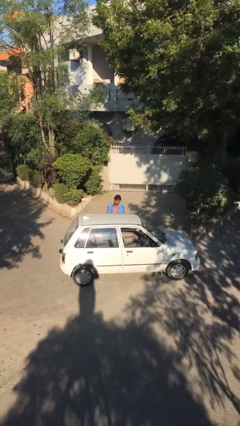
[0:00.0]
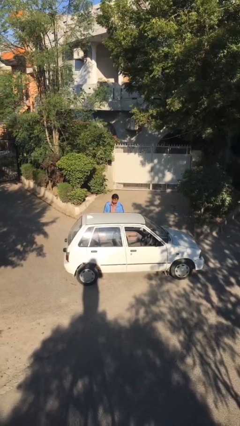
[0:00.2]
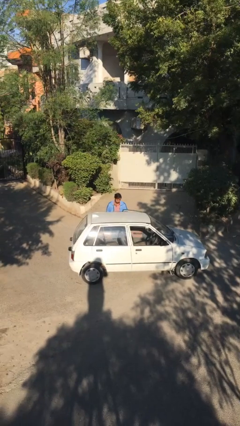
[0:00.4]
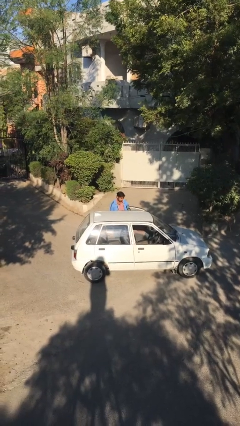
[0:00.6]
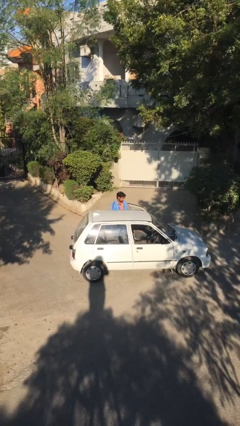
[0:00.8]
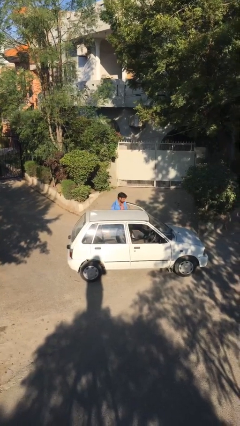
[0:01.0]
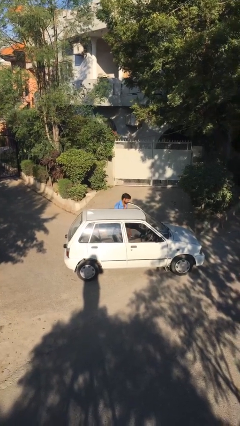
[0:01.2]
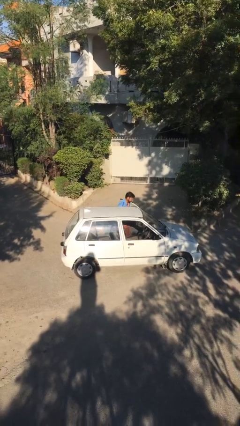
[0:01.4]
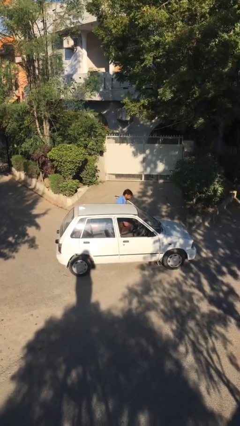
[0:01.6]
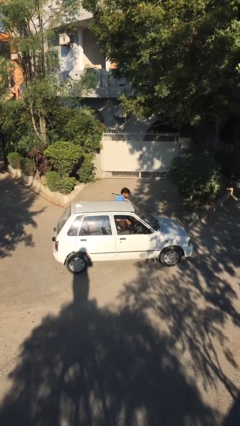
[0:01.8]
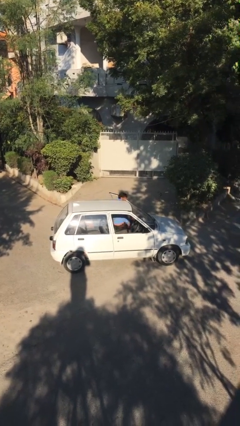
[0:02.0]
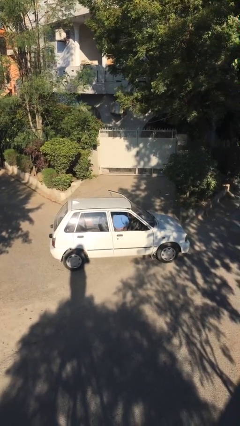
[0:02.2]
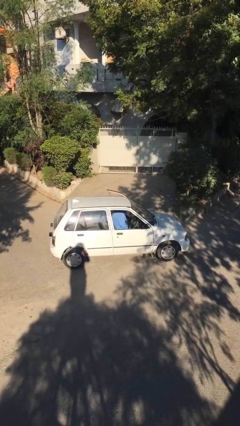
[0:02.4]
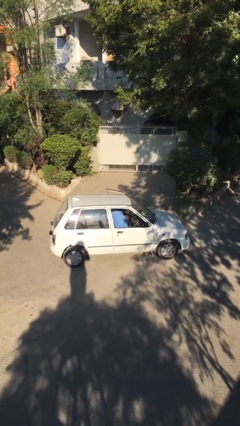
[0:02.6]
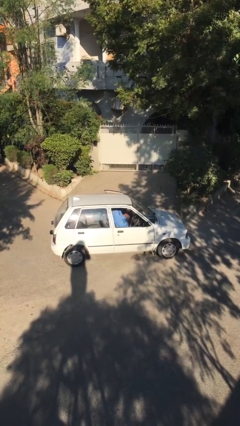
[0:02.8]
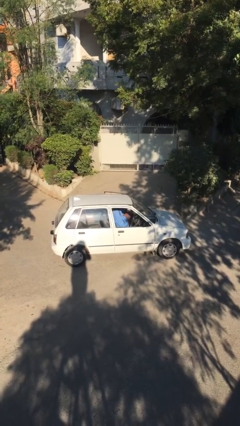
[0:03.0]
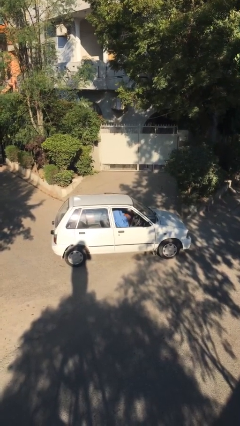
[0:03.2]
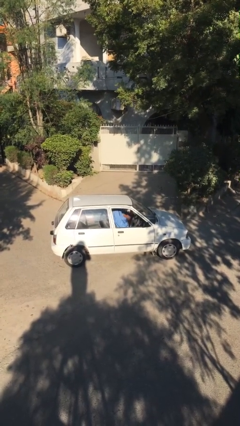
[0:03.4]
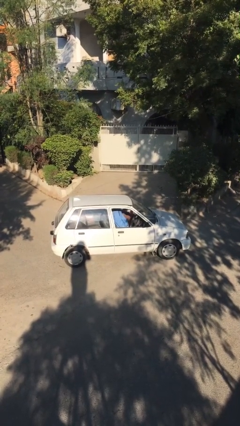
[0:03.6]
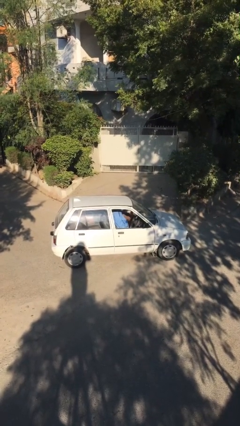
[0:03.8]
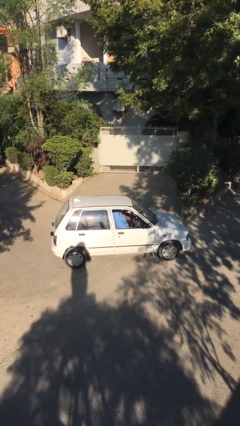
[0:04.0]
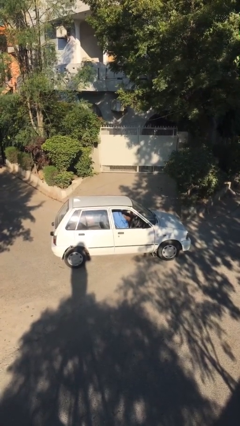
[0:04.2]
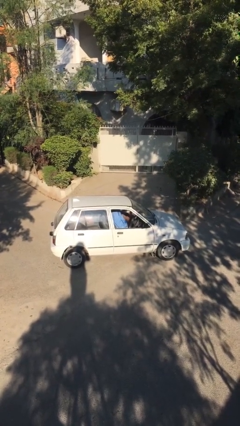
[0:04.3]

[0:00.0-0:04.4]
person enters car

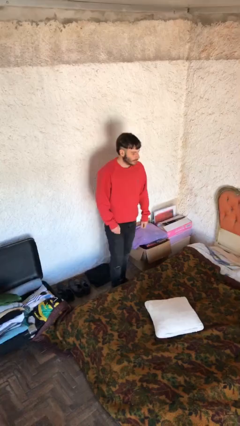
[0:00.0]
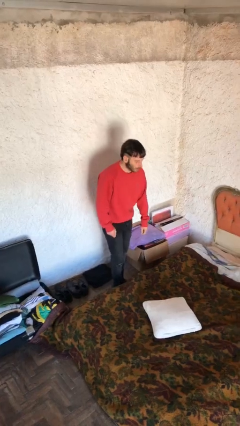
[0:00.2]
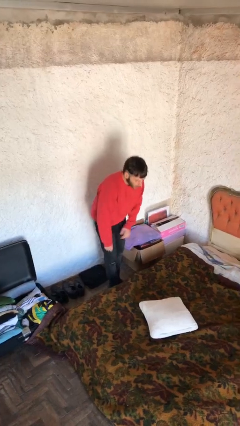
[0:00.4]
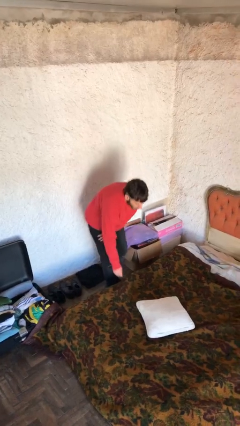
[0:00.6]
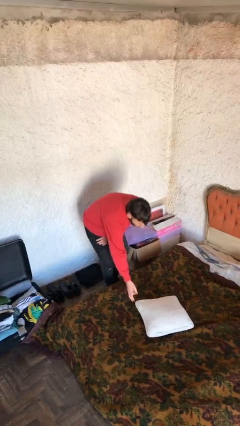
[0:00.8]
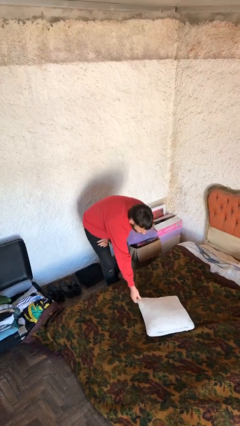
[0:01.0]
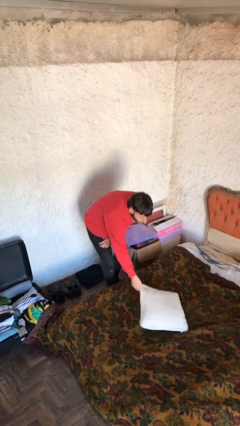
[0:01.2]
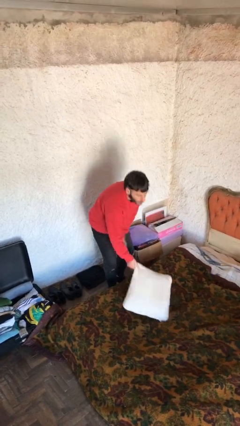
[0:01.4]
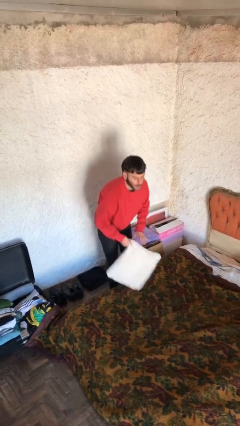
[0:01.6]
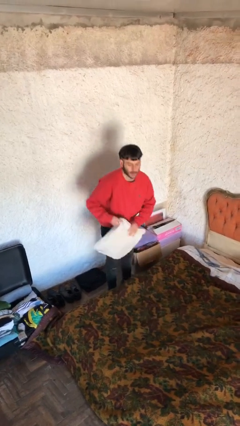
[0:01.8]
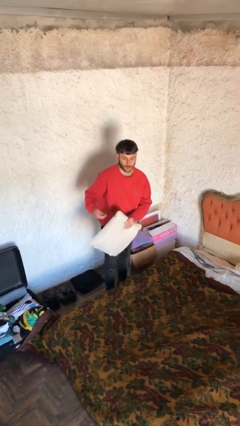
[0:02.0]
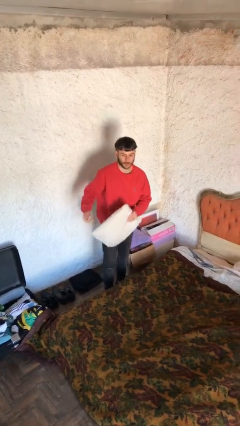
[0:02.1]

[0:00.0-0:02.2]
person picks up object from bed

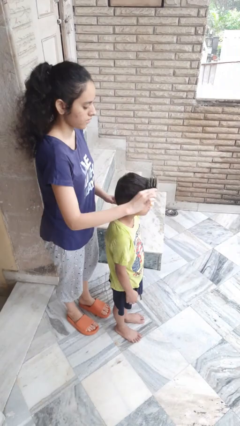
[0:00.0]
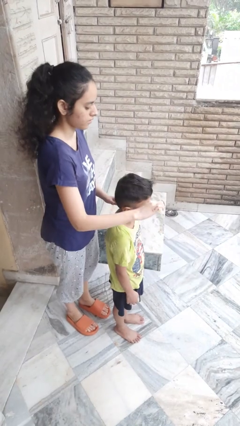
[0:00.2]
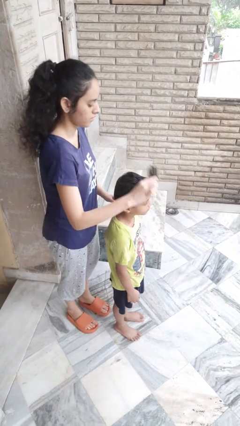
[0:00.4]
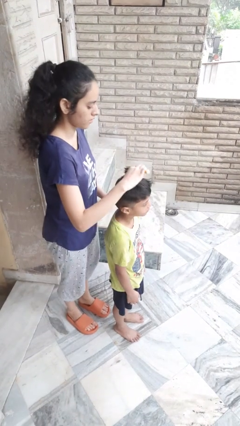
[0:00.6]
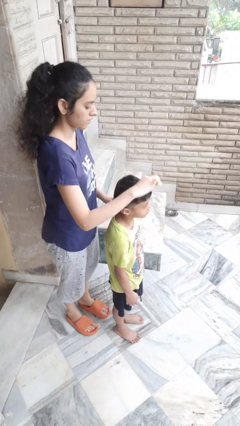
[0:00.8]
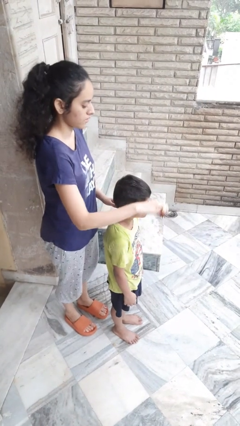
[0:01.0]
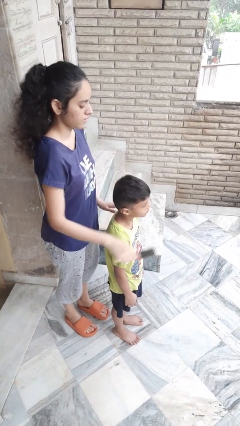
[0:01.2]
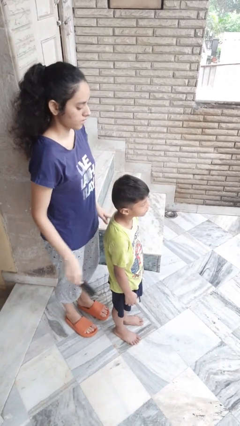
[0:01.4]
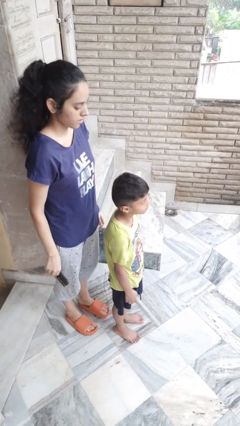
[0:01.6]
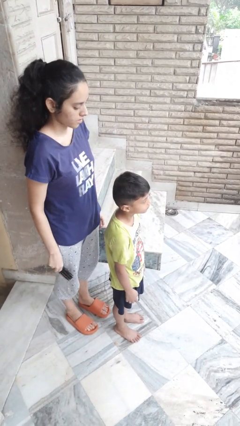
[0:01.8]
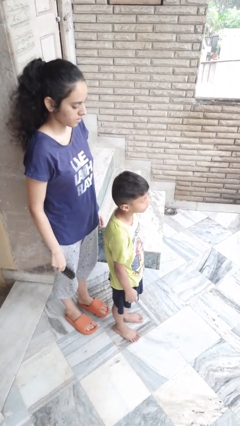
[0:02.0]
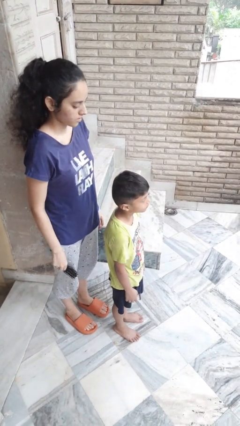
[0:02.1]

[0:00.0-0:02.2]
person brushes hair of person

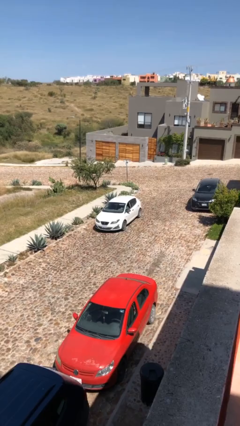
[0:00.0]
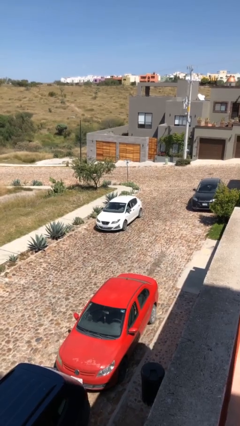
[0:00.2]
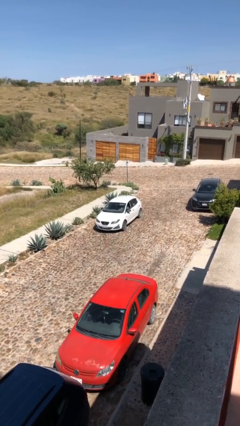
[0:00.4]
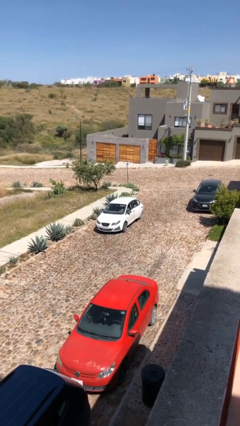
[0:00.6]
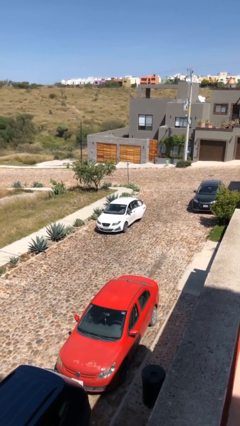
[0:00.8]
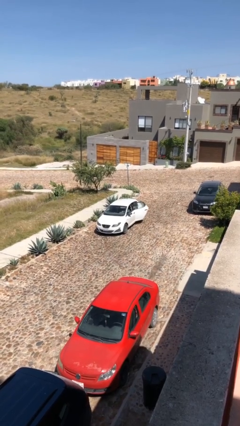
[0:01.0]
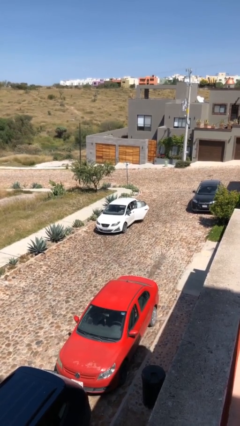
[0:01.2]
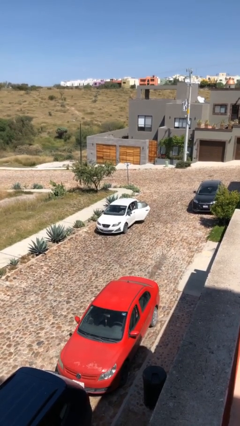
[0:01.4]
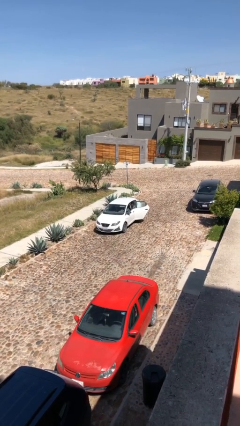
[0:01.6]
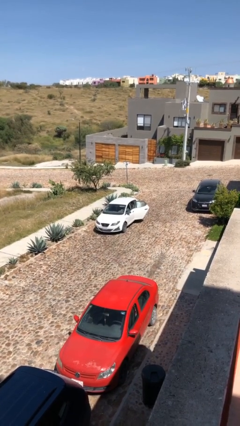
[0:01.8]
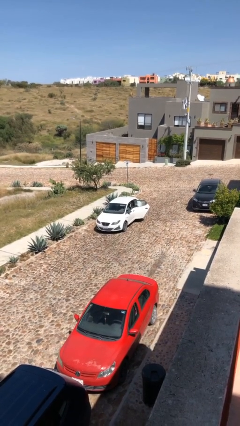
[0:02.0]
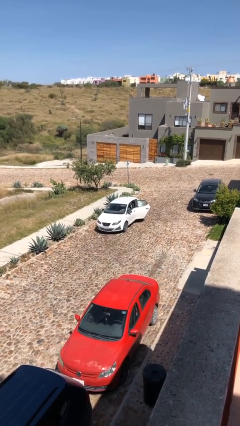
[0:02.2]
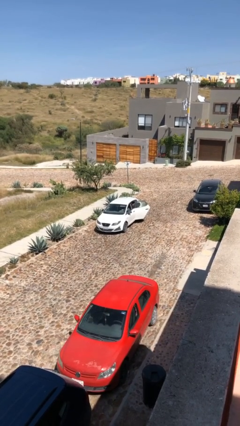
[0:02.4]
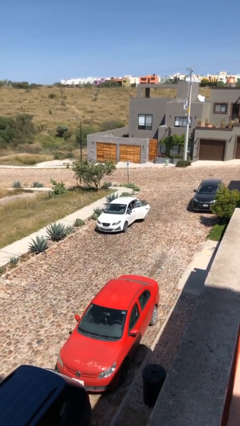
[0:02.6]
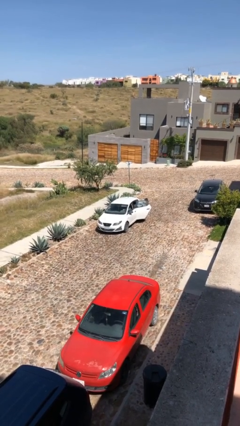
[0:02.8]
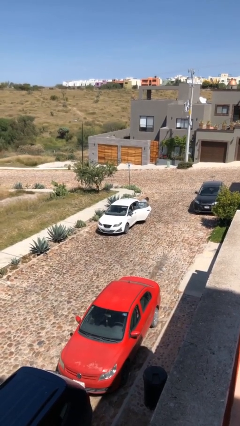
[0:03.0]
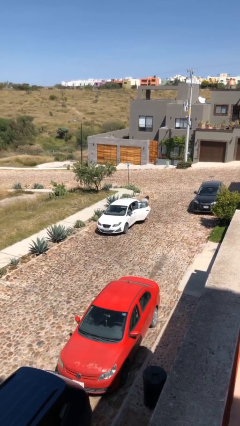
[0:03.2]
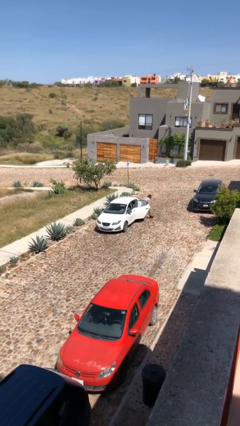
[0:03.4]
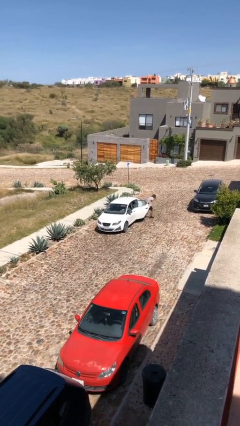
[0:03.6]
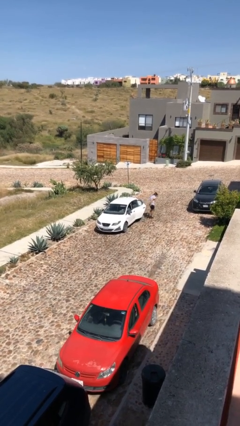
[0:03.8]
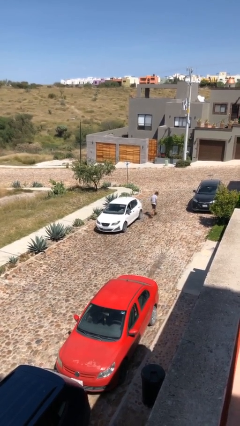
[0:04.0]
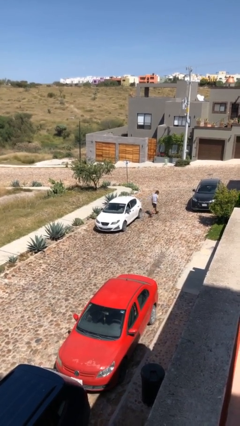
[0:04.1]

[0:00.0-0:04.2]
car drops off person

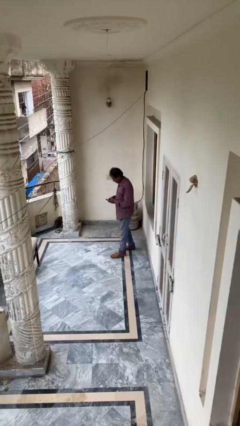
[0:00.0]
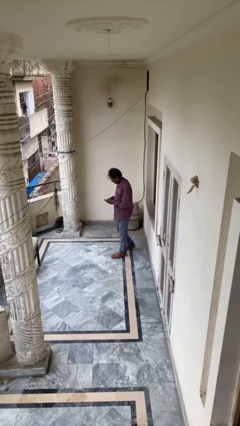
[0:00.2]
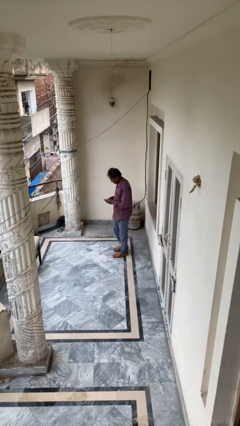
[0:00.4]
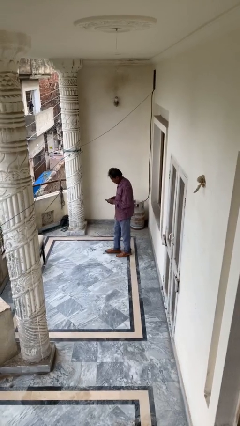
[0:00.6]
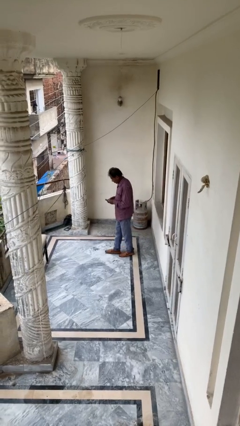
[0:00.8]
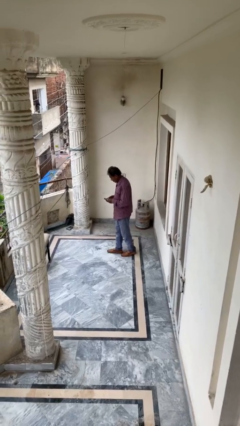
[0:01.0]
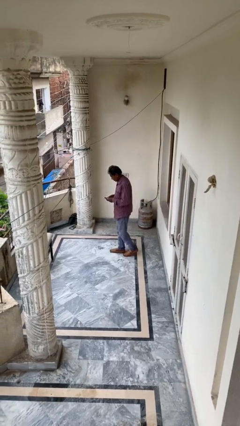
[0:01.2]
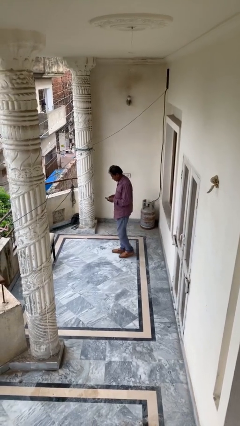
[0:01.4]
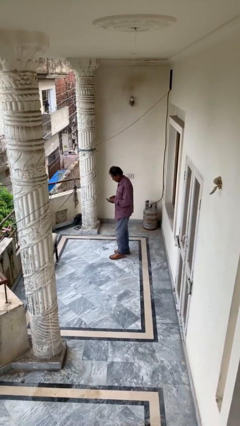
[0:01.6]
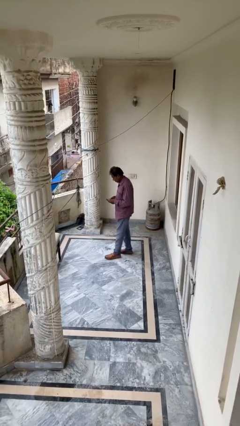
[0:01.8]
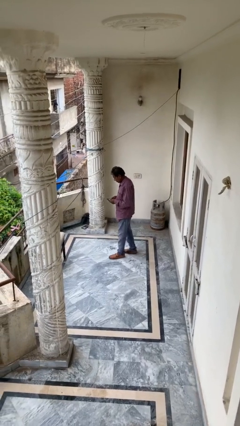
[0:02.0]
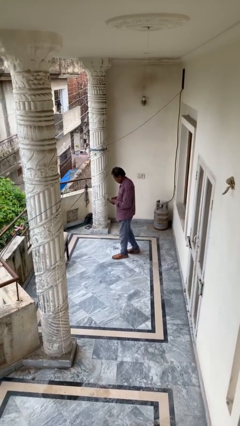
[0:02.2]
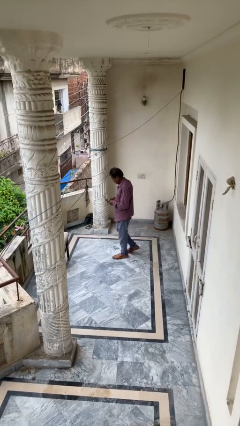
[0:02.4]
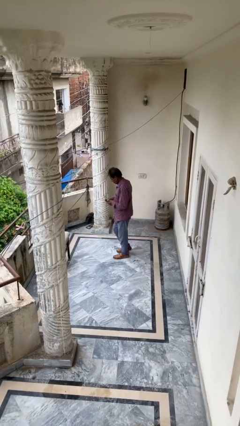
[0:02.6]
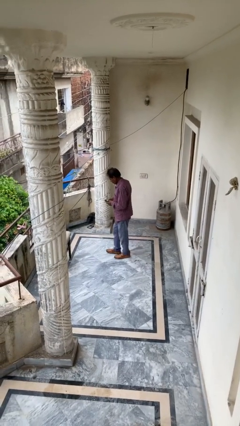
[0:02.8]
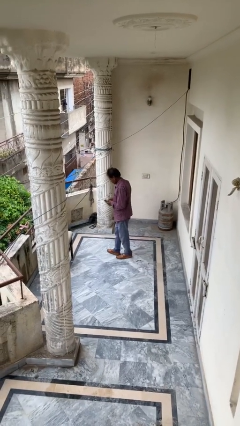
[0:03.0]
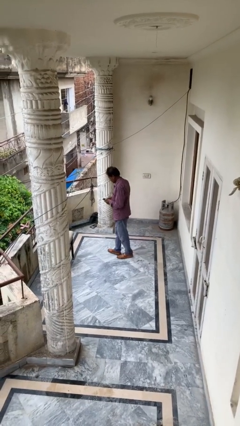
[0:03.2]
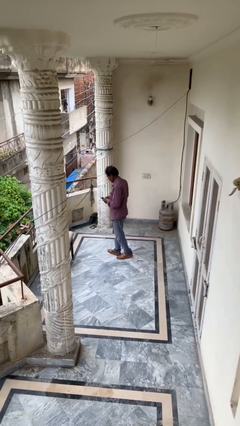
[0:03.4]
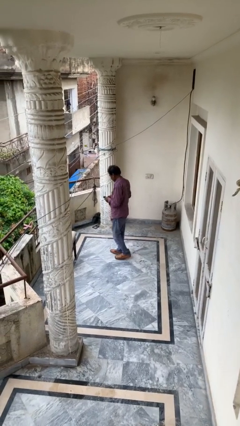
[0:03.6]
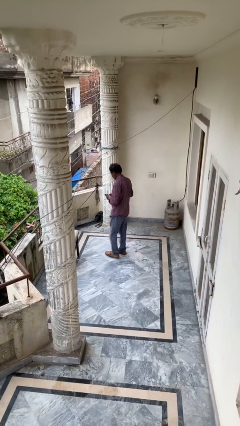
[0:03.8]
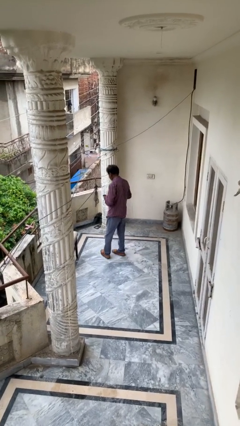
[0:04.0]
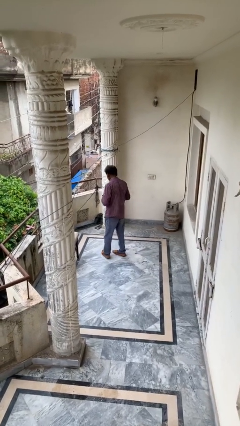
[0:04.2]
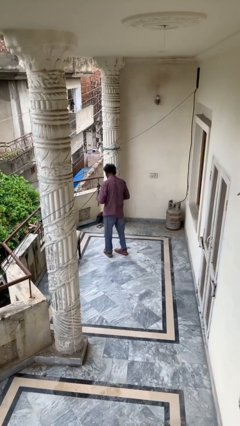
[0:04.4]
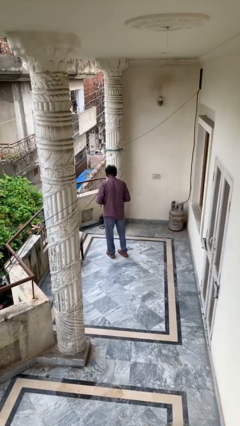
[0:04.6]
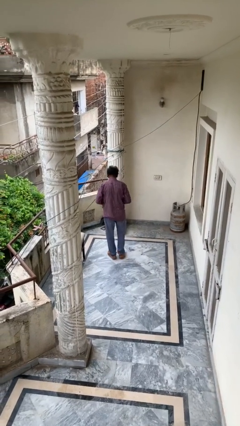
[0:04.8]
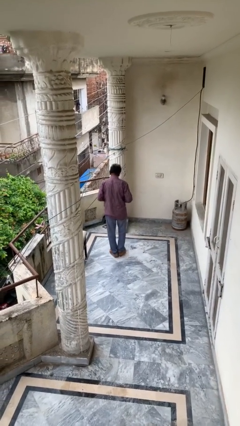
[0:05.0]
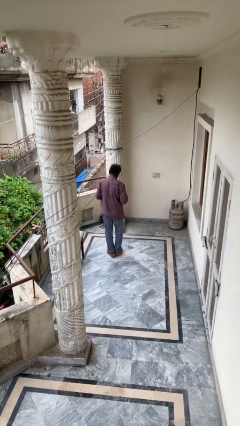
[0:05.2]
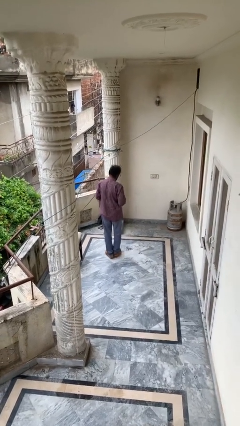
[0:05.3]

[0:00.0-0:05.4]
person texts on phone
